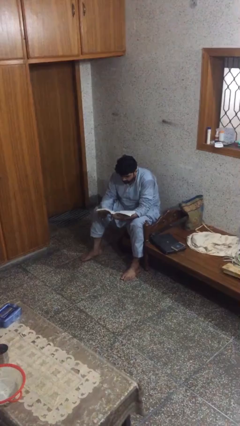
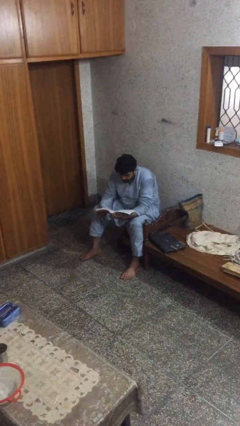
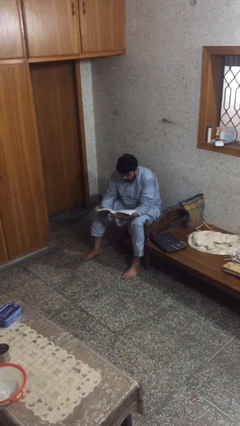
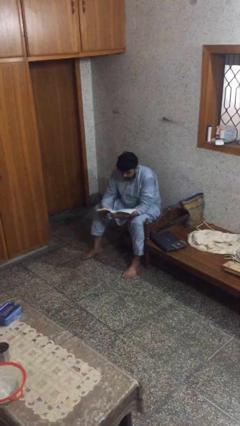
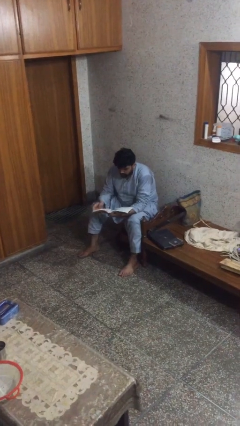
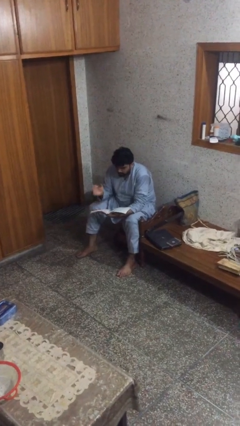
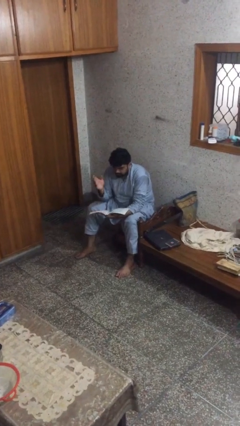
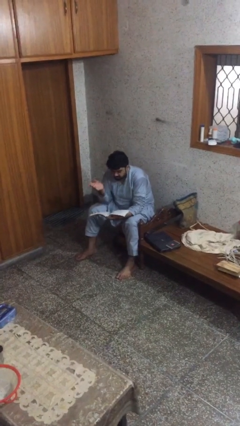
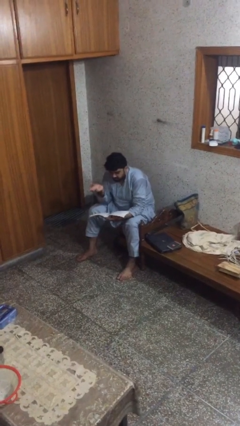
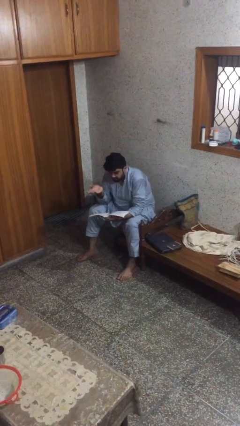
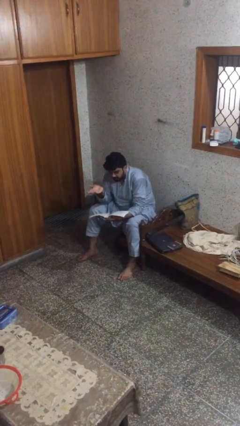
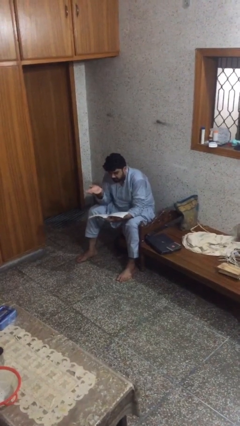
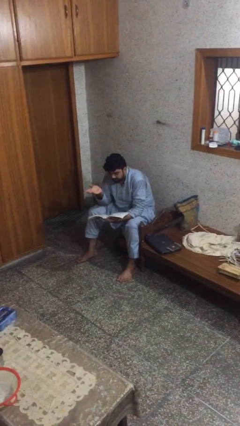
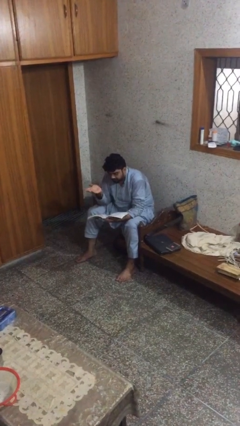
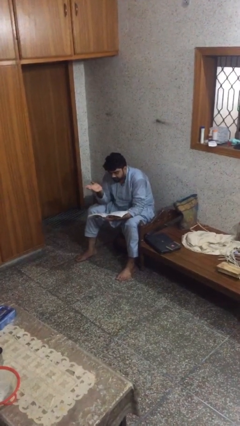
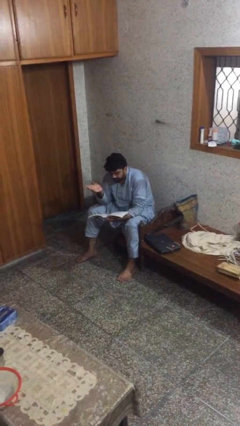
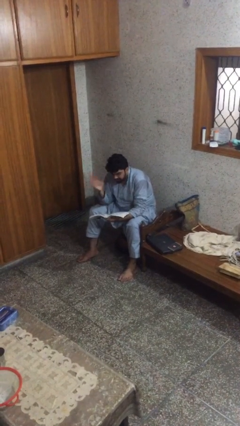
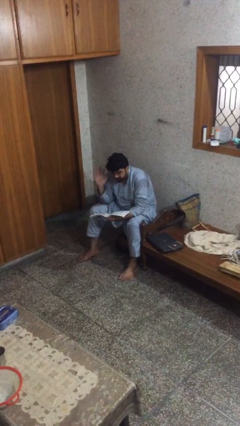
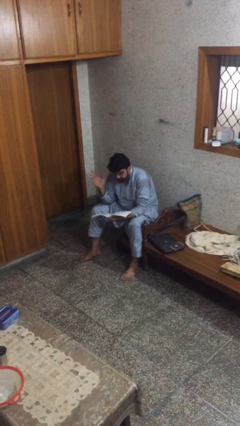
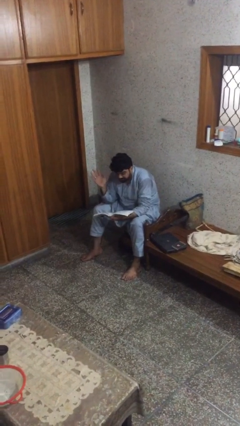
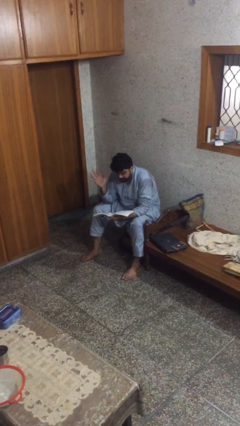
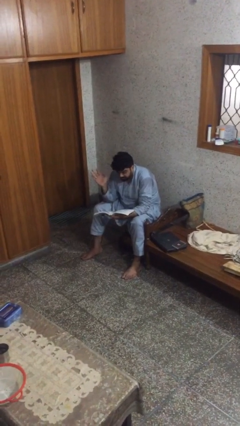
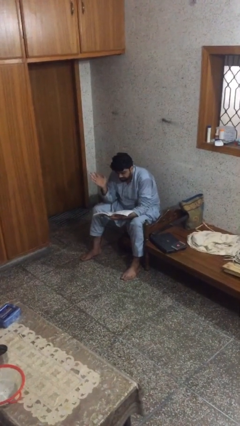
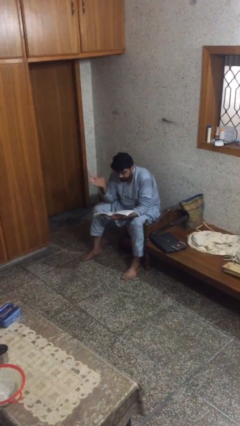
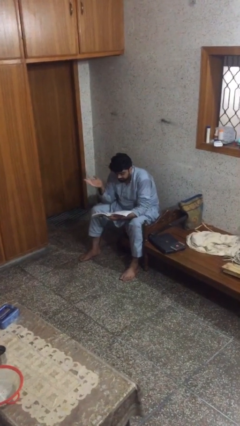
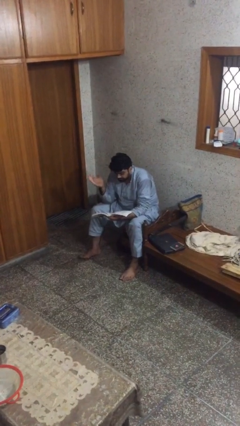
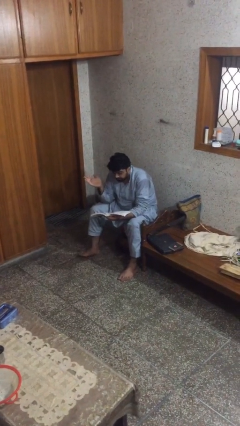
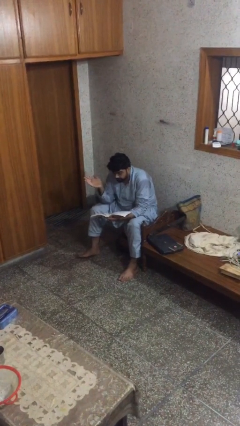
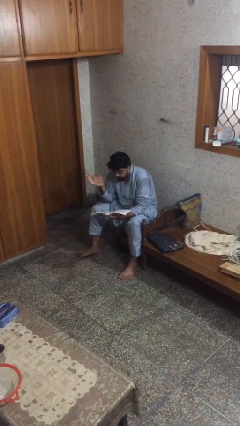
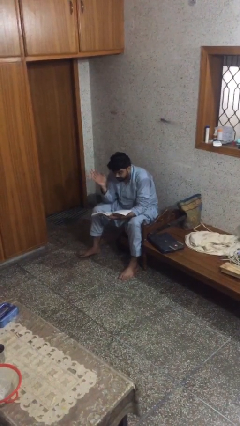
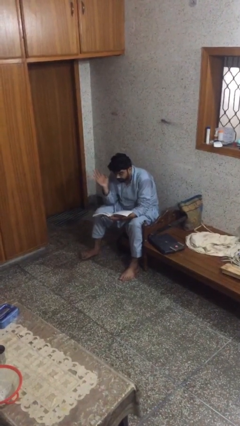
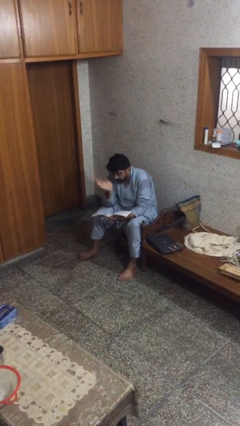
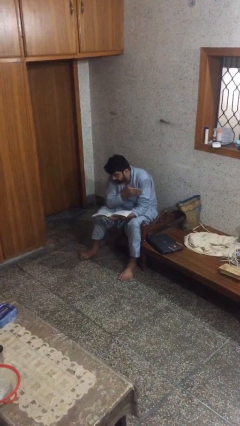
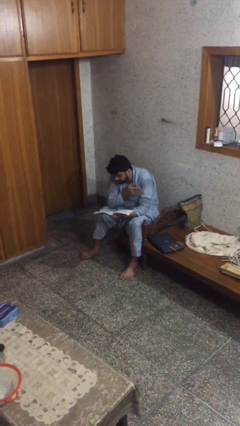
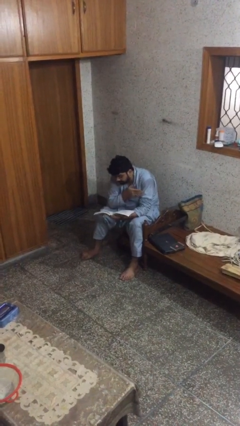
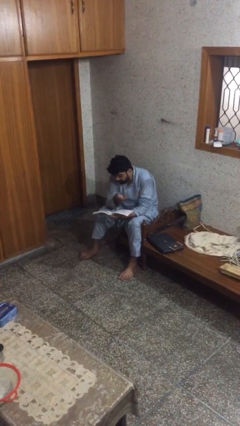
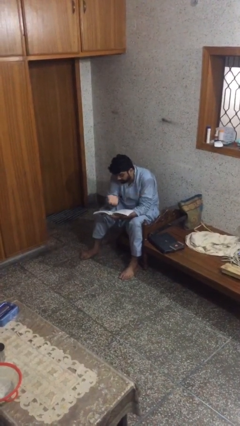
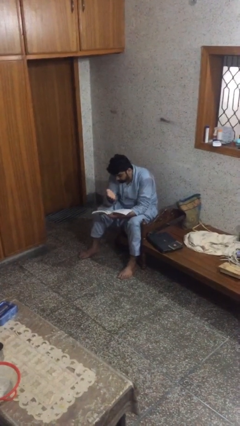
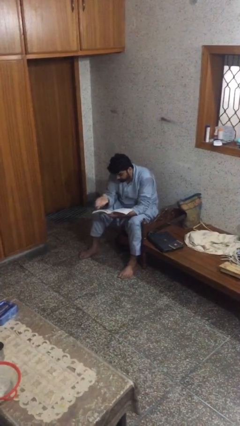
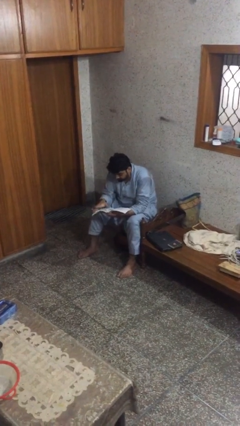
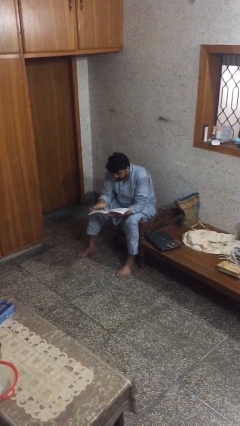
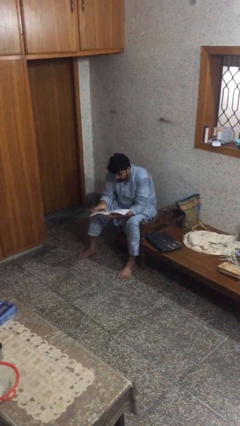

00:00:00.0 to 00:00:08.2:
person reads document

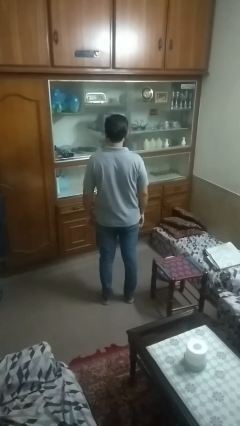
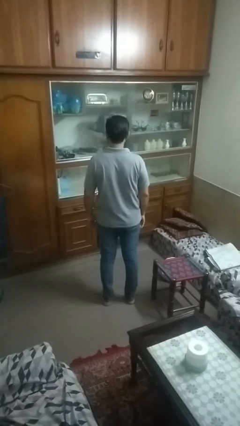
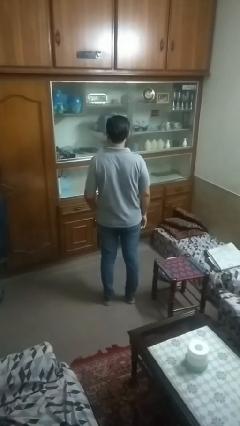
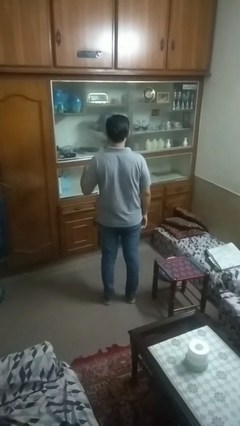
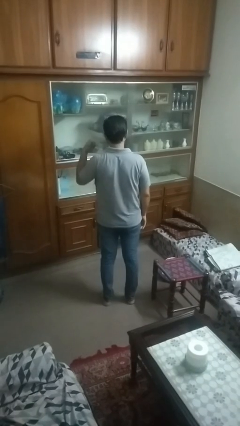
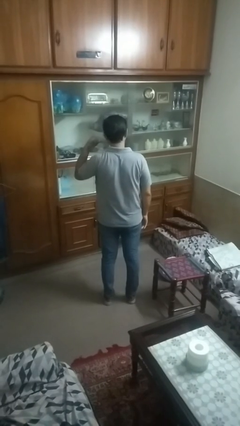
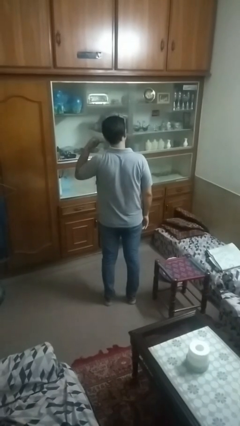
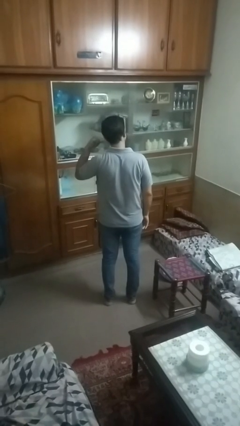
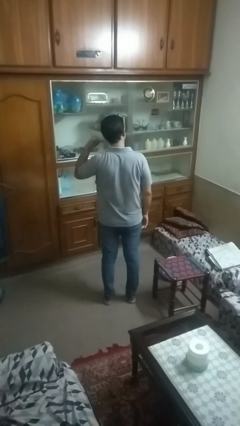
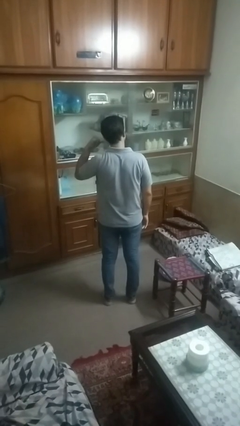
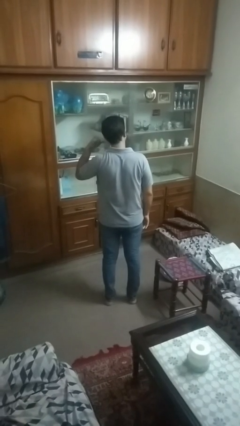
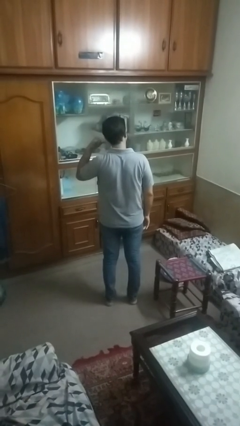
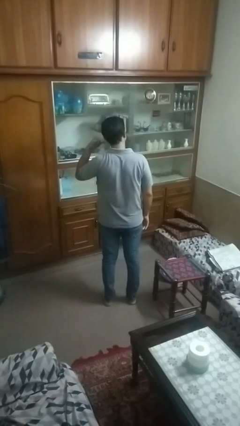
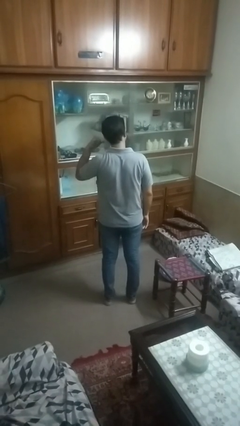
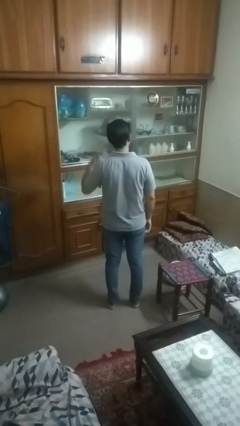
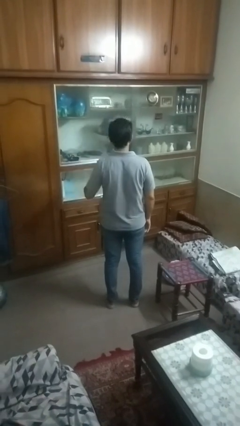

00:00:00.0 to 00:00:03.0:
person gestures call me

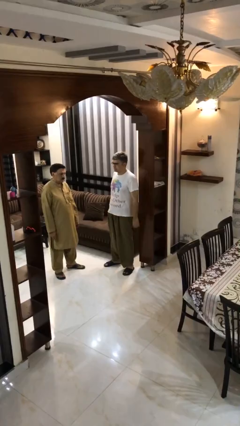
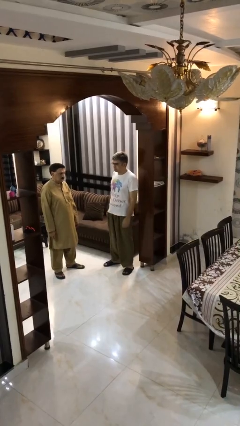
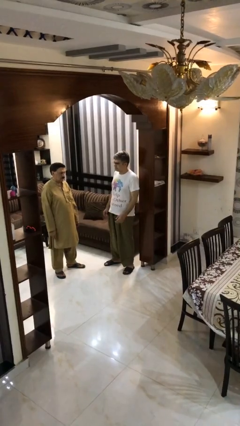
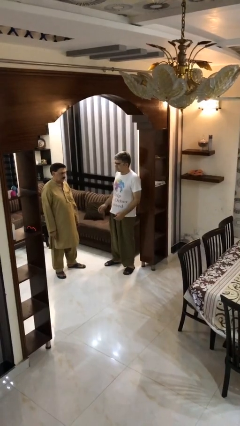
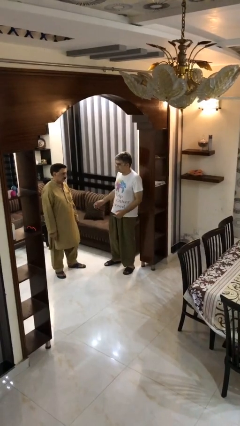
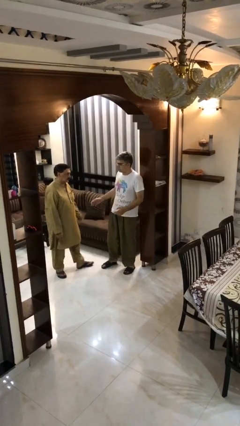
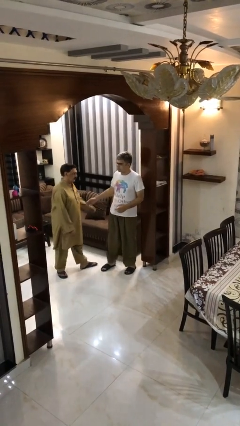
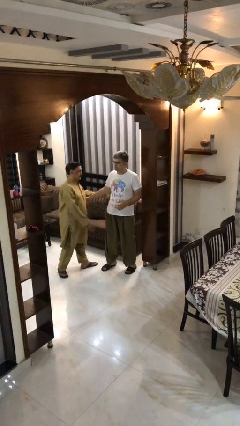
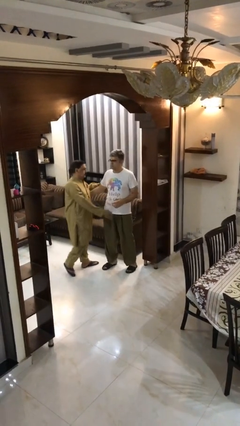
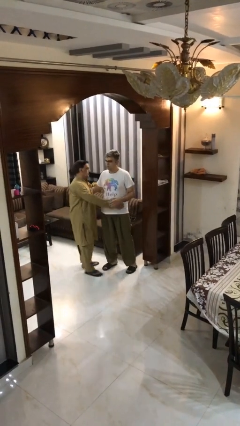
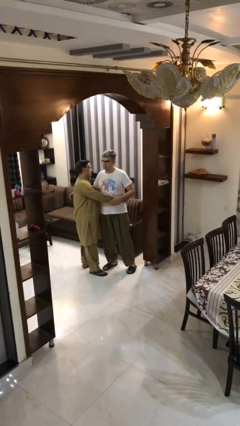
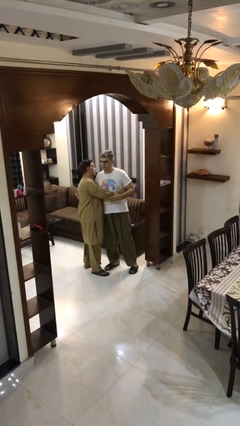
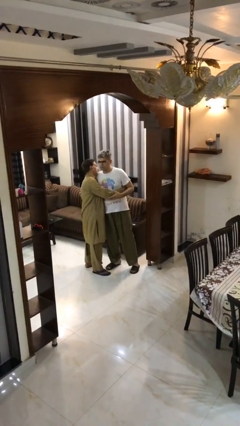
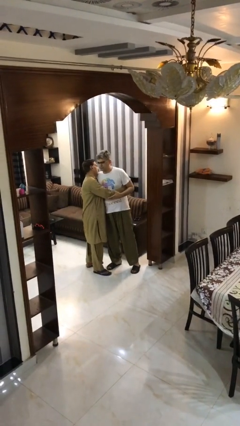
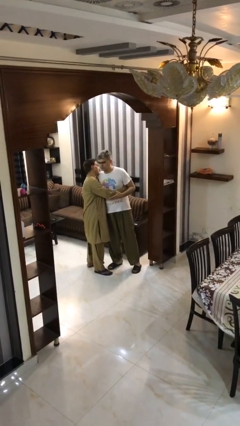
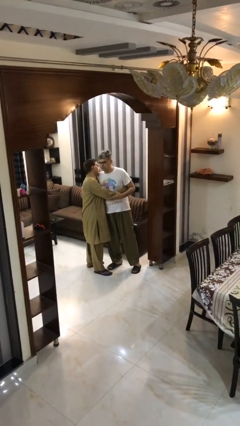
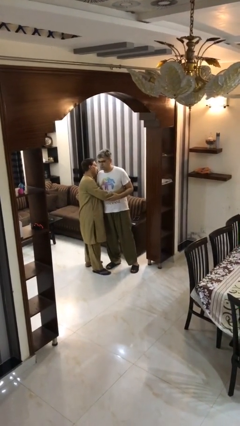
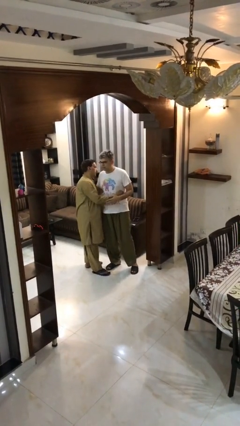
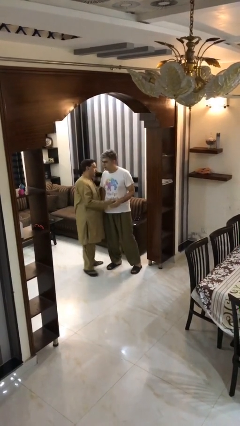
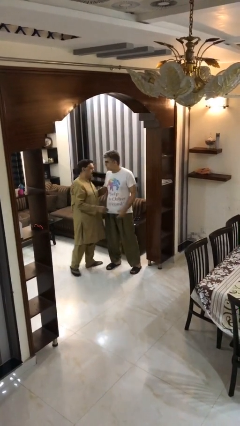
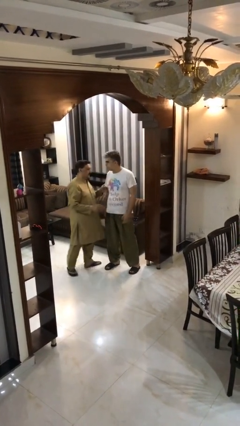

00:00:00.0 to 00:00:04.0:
person embraces person

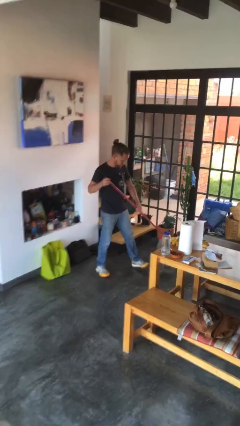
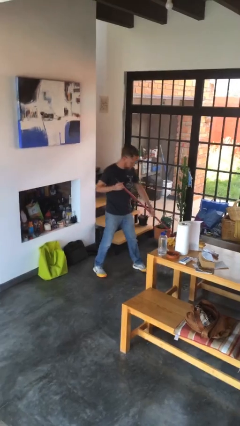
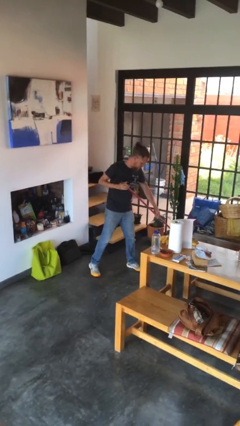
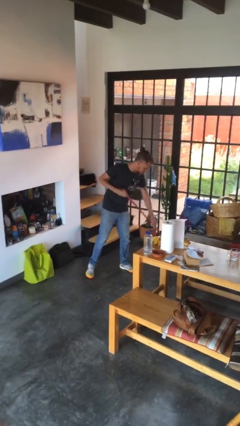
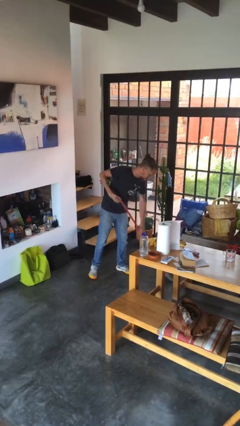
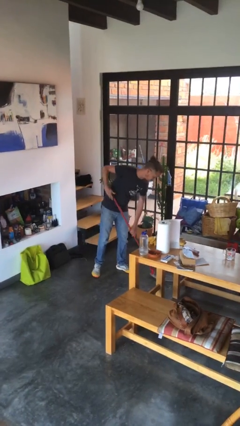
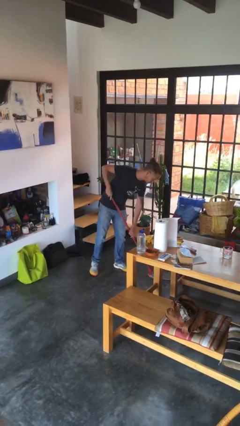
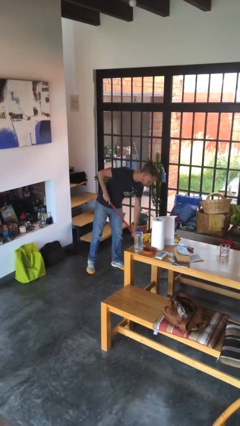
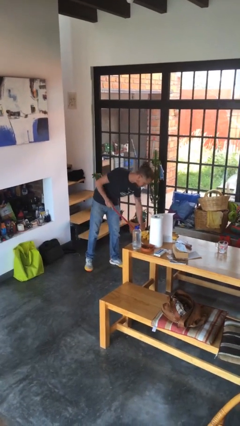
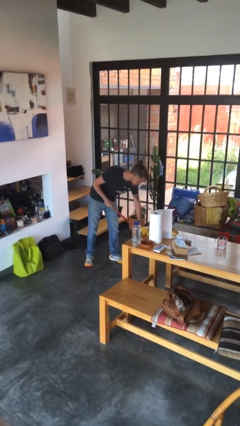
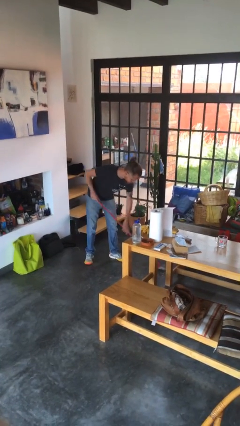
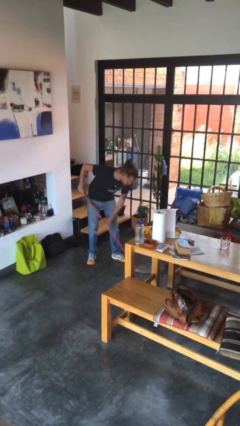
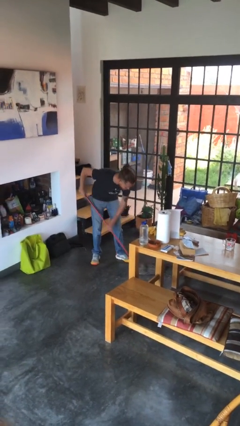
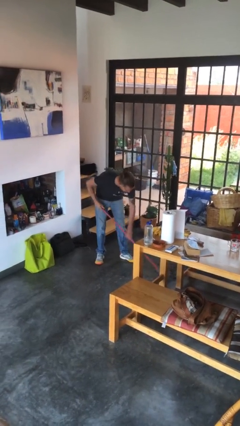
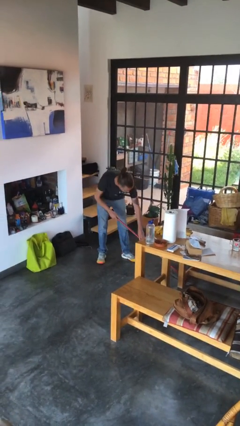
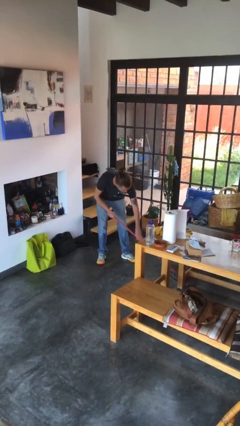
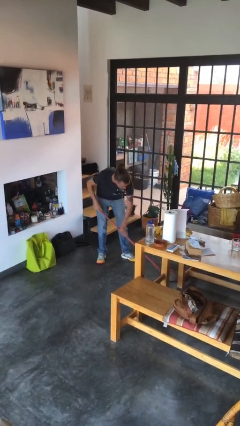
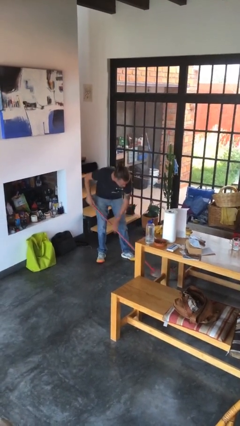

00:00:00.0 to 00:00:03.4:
person mops
